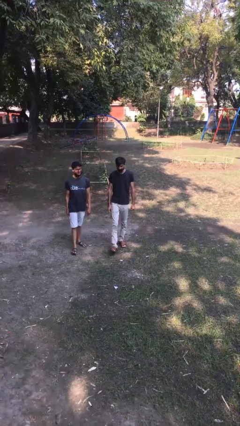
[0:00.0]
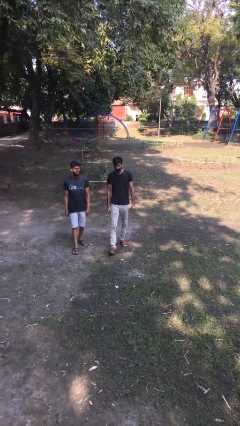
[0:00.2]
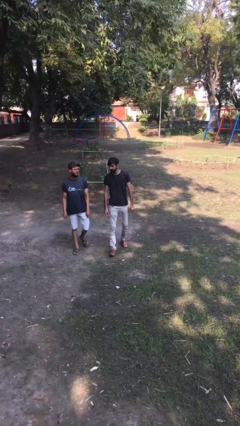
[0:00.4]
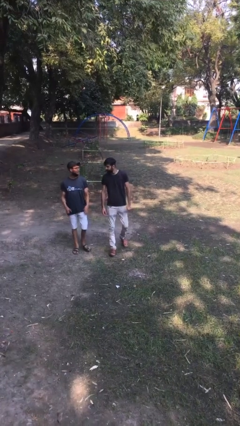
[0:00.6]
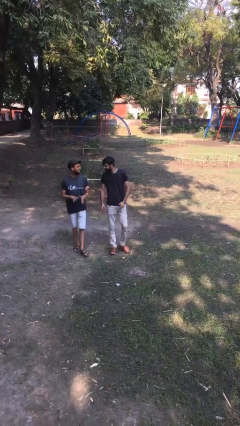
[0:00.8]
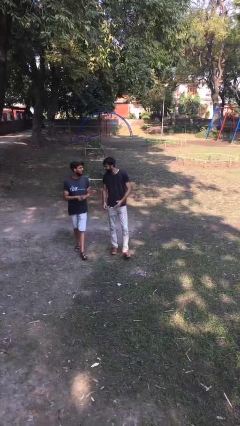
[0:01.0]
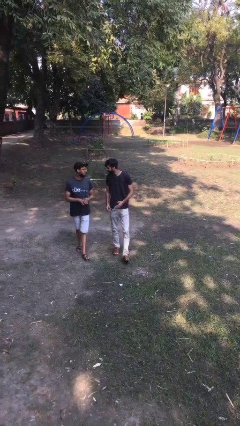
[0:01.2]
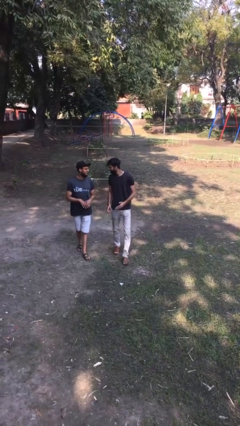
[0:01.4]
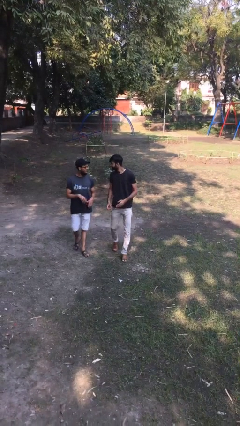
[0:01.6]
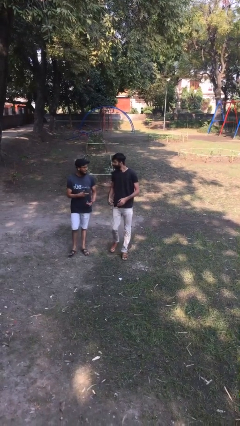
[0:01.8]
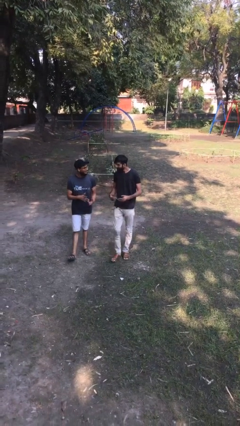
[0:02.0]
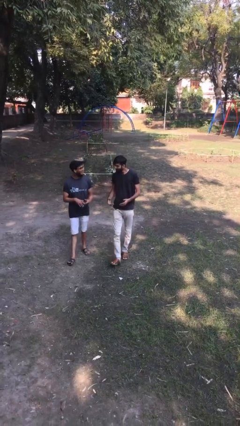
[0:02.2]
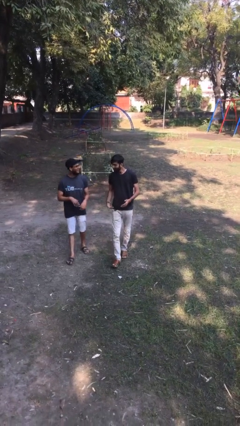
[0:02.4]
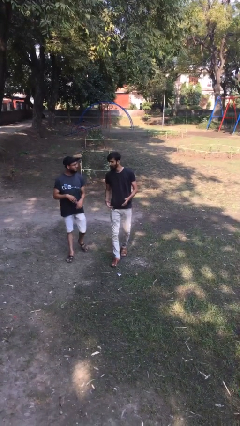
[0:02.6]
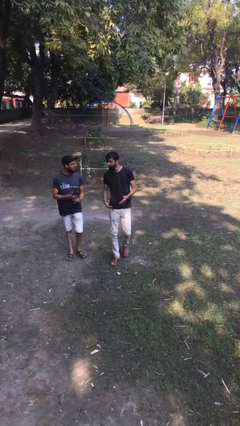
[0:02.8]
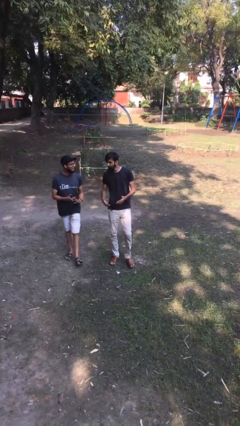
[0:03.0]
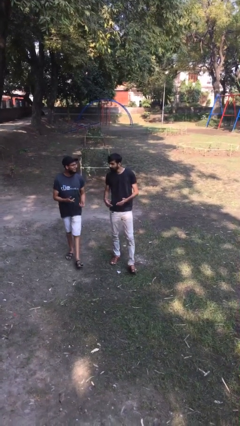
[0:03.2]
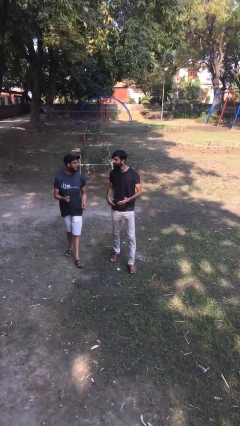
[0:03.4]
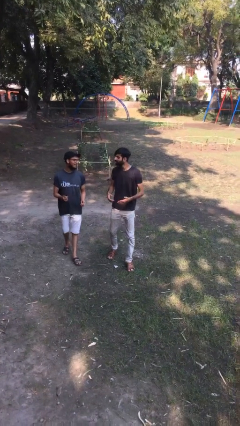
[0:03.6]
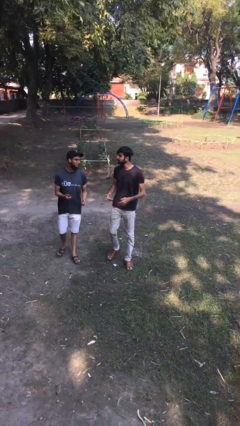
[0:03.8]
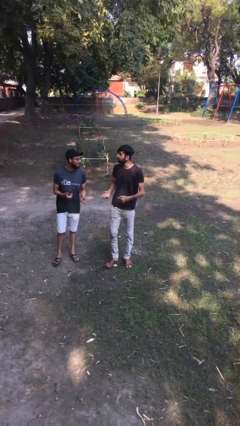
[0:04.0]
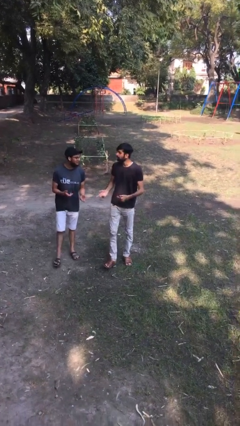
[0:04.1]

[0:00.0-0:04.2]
person talks to person

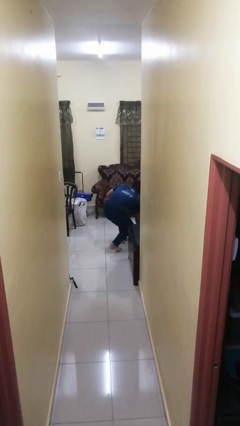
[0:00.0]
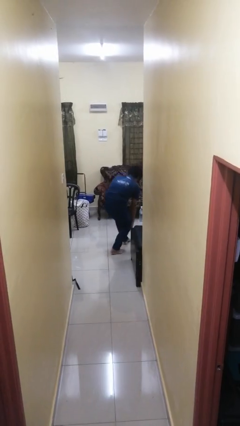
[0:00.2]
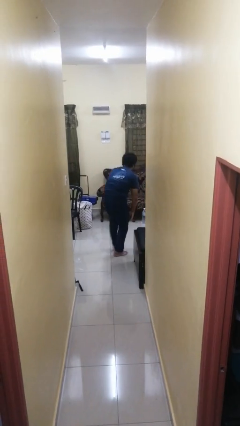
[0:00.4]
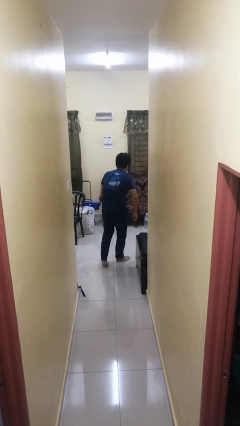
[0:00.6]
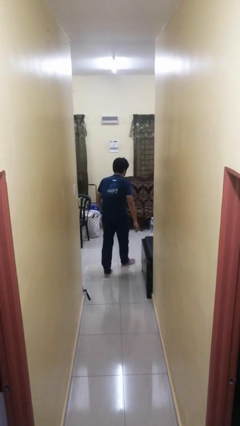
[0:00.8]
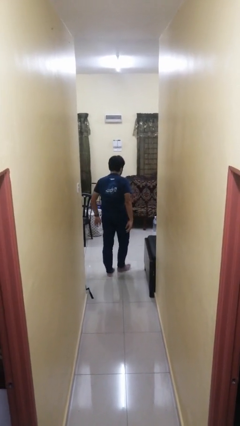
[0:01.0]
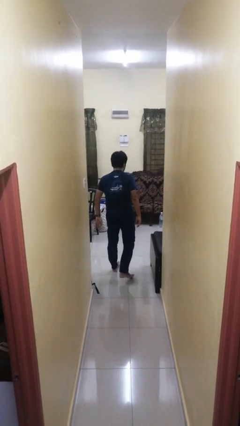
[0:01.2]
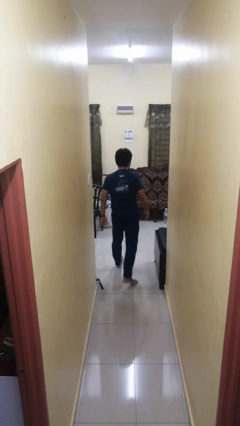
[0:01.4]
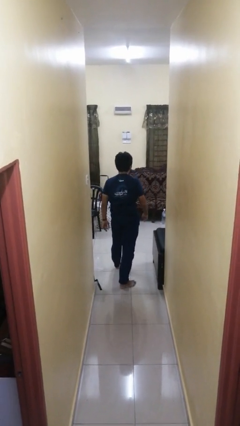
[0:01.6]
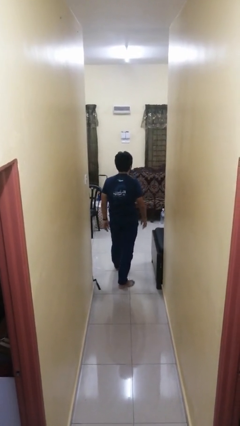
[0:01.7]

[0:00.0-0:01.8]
person stands up from floor

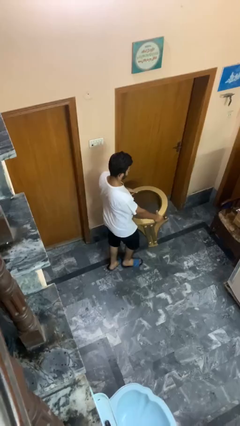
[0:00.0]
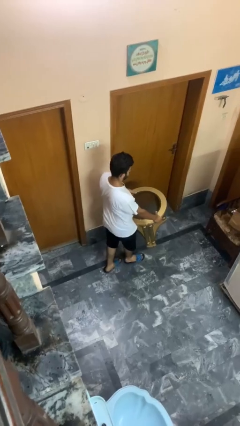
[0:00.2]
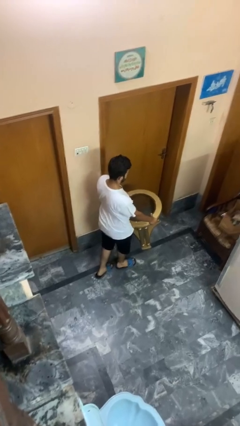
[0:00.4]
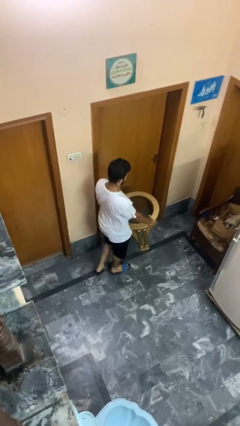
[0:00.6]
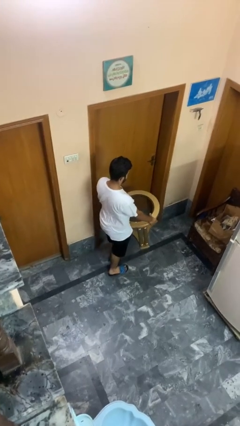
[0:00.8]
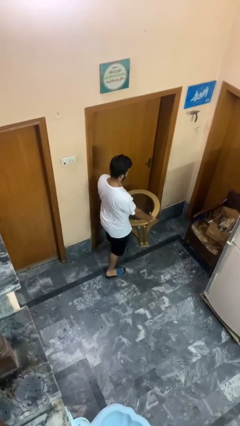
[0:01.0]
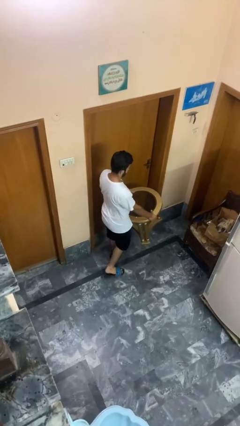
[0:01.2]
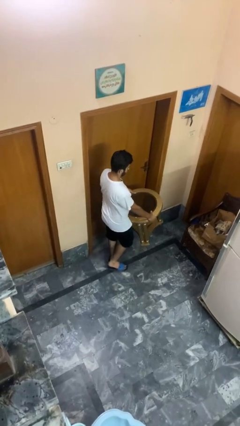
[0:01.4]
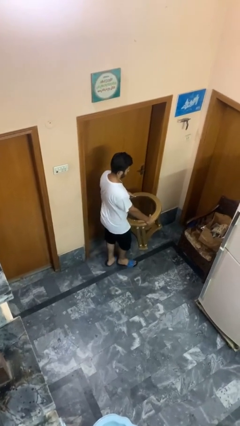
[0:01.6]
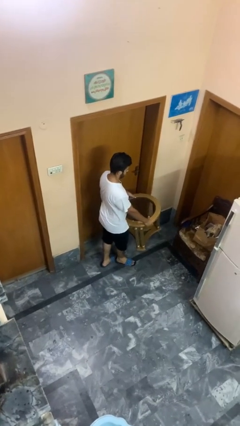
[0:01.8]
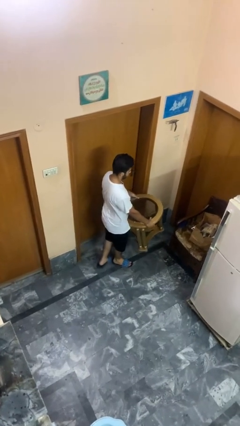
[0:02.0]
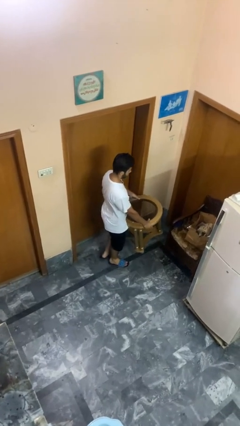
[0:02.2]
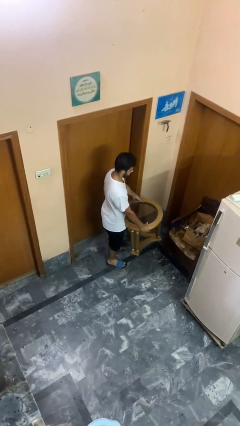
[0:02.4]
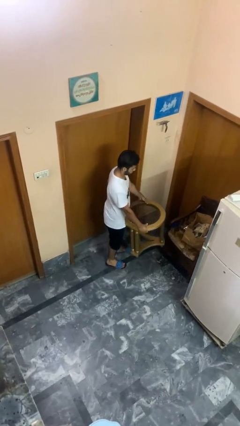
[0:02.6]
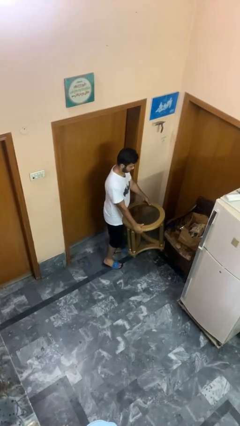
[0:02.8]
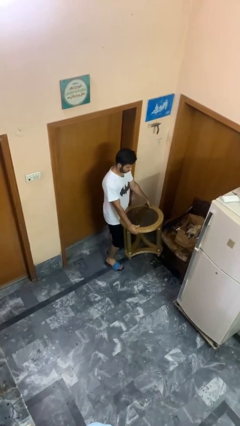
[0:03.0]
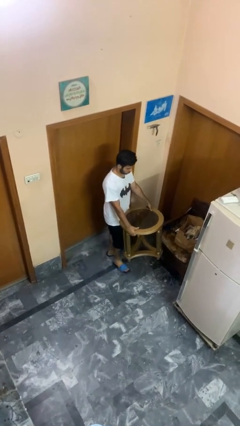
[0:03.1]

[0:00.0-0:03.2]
person carries furniture

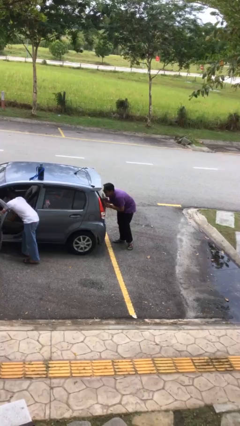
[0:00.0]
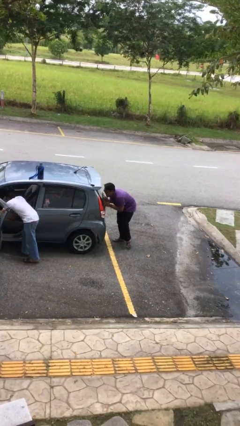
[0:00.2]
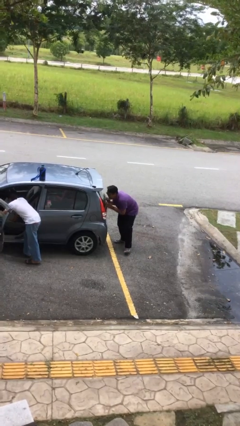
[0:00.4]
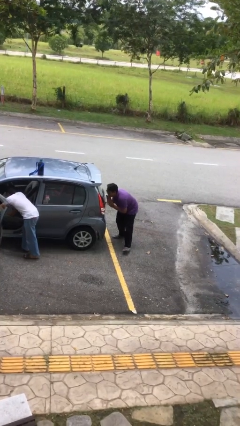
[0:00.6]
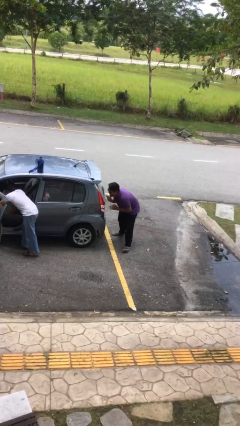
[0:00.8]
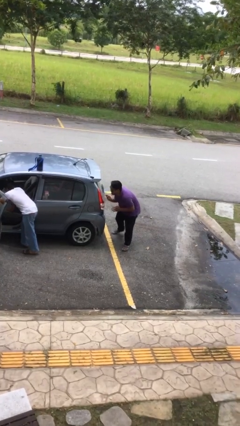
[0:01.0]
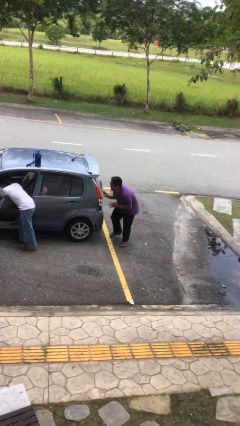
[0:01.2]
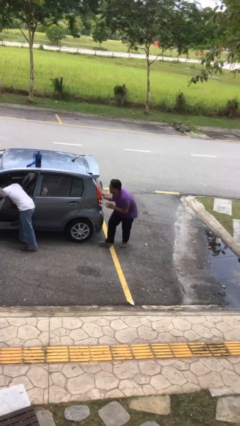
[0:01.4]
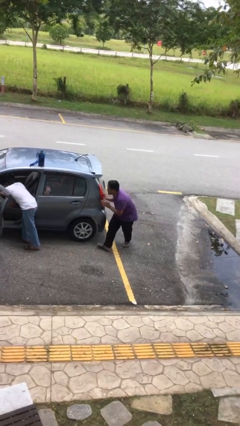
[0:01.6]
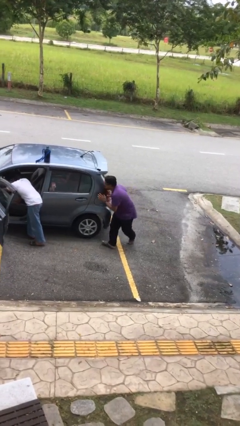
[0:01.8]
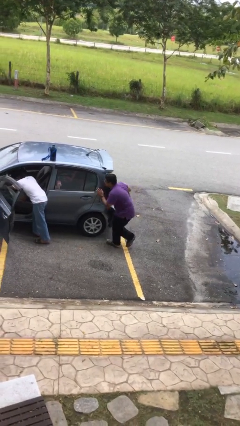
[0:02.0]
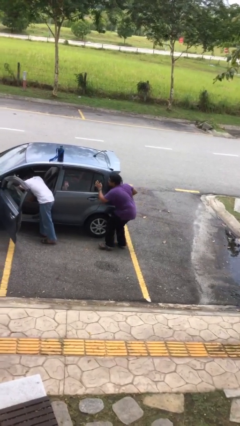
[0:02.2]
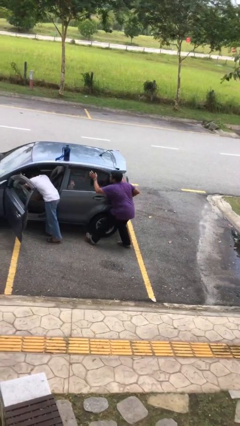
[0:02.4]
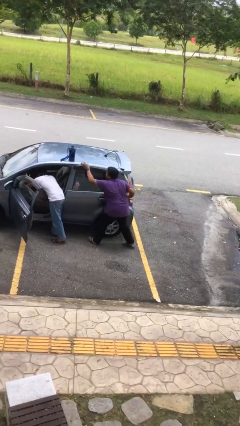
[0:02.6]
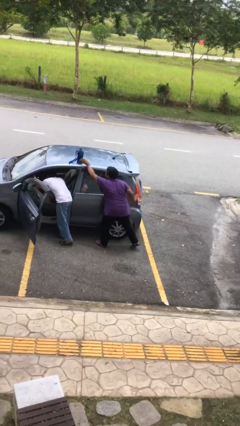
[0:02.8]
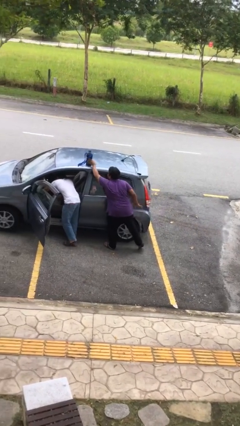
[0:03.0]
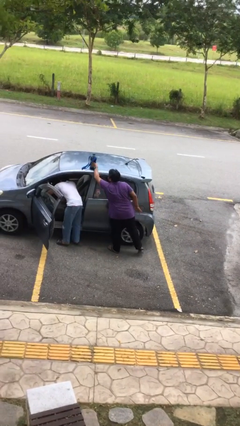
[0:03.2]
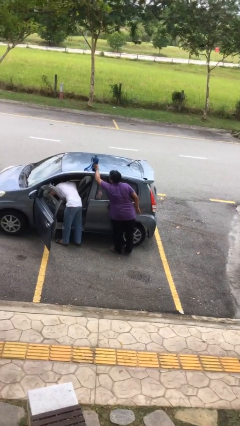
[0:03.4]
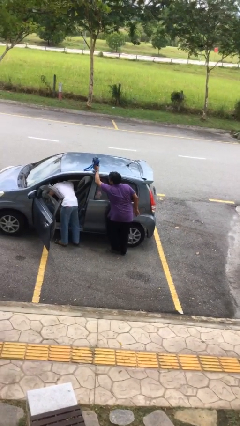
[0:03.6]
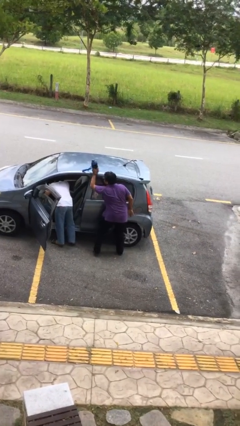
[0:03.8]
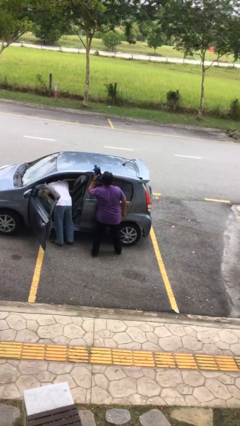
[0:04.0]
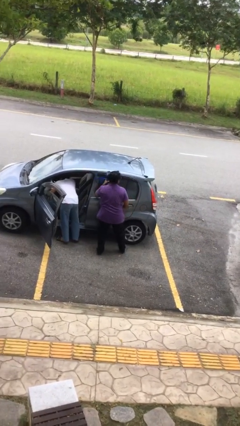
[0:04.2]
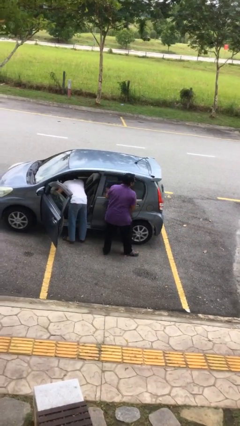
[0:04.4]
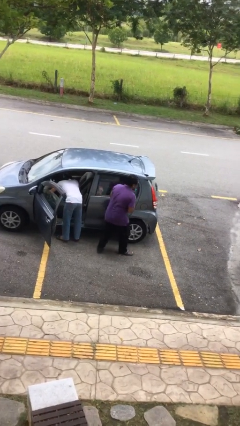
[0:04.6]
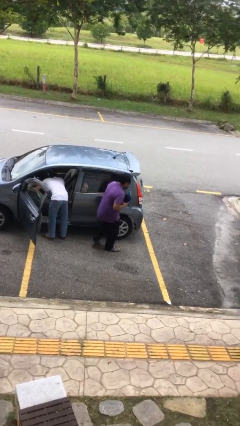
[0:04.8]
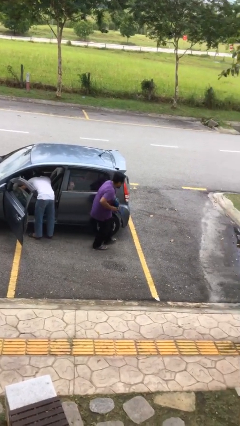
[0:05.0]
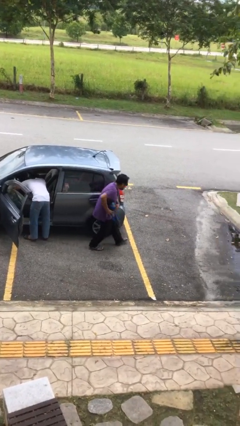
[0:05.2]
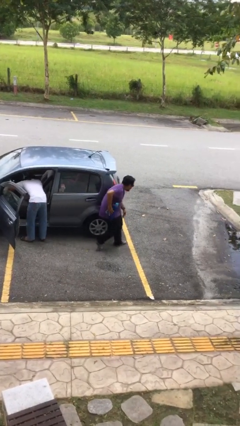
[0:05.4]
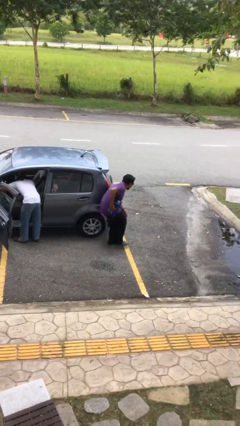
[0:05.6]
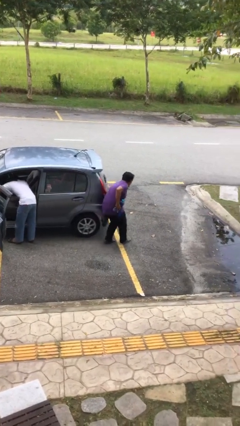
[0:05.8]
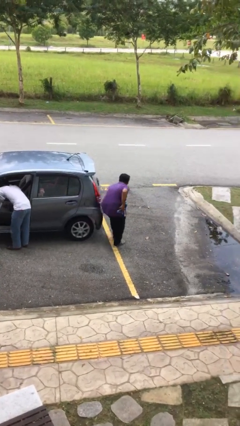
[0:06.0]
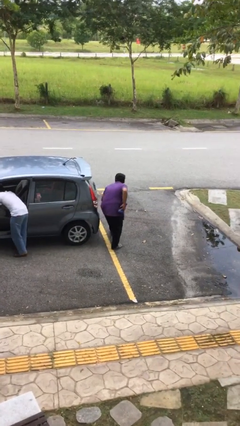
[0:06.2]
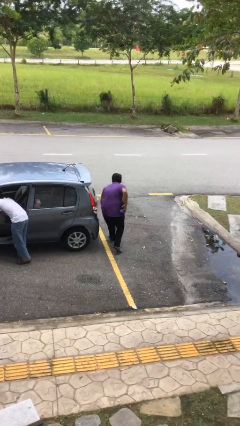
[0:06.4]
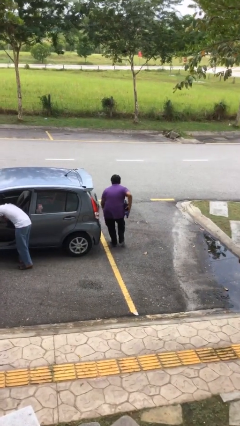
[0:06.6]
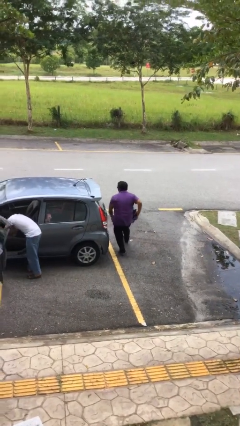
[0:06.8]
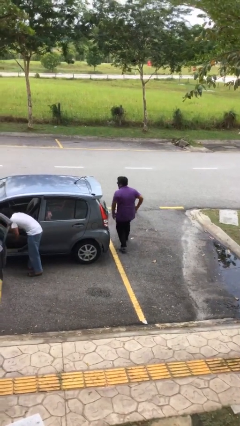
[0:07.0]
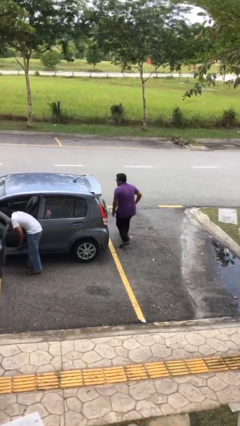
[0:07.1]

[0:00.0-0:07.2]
person steals object from person

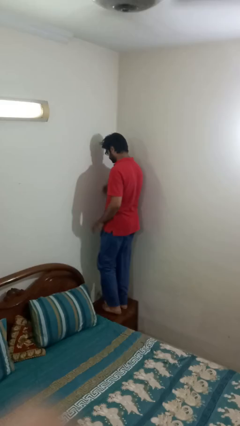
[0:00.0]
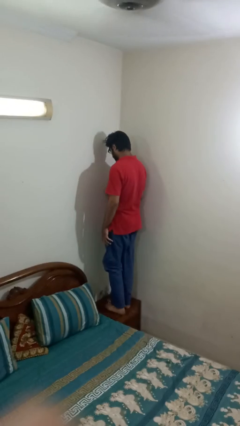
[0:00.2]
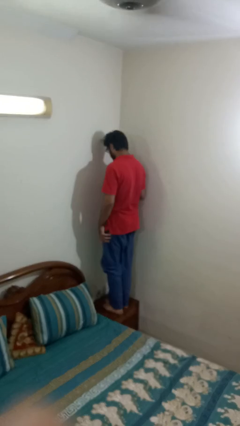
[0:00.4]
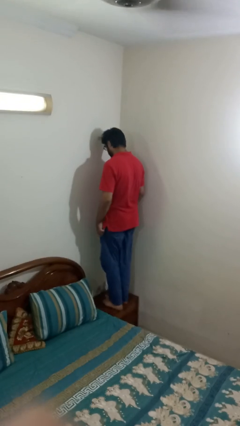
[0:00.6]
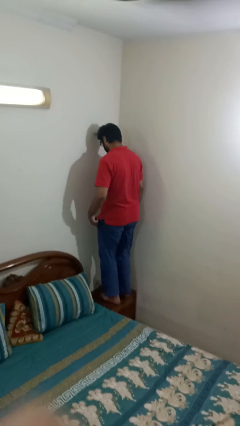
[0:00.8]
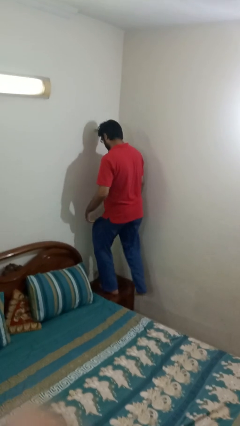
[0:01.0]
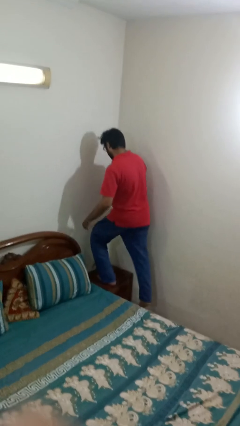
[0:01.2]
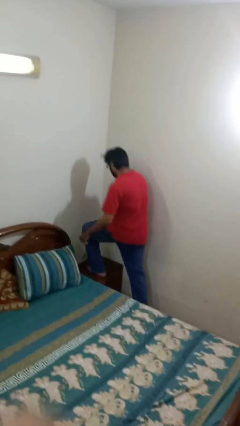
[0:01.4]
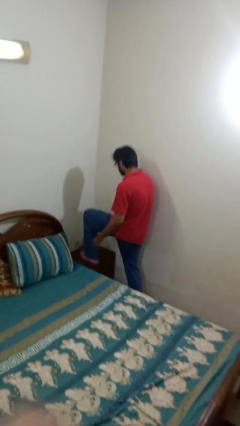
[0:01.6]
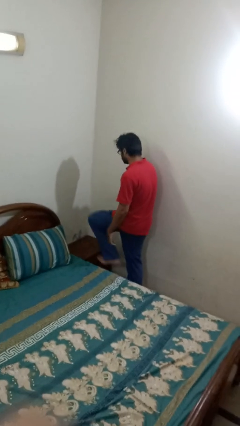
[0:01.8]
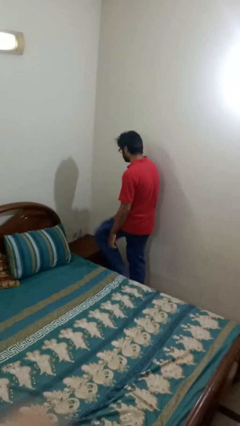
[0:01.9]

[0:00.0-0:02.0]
person climbs off table
